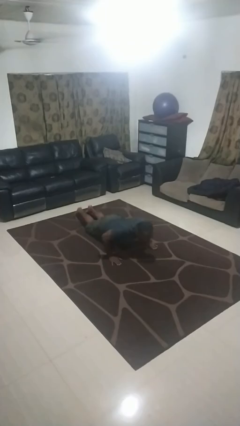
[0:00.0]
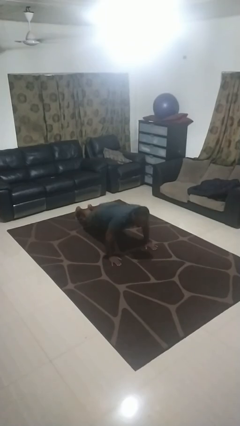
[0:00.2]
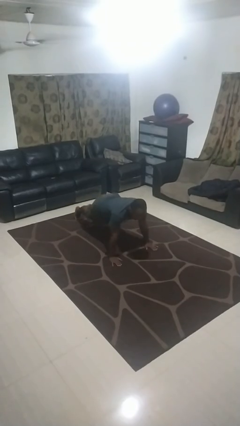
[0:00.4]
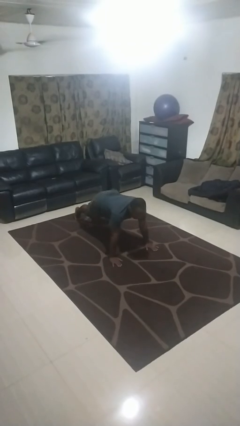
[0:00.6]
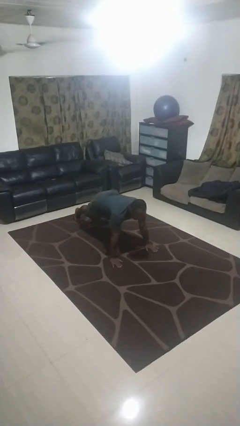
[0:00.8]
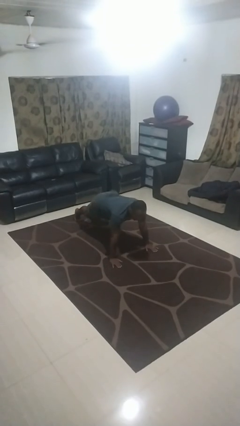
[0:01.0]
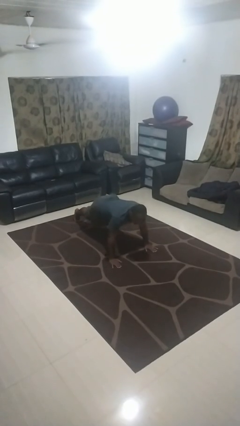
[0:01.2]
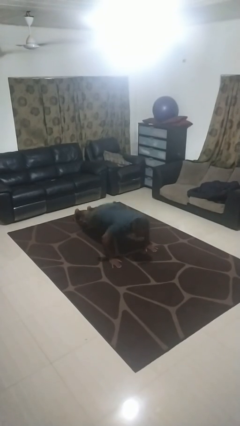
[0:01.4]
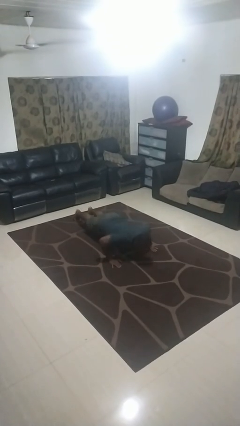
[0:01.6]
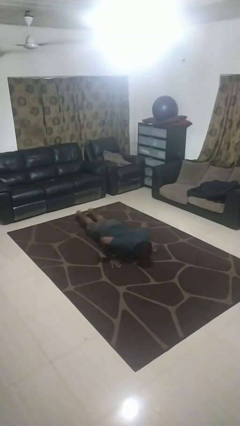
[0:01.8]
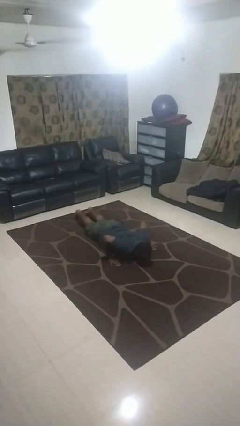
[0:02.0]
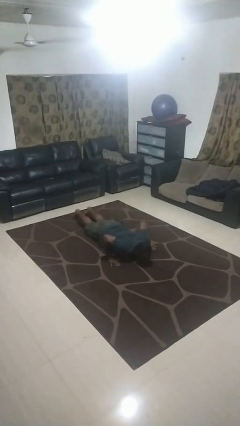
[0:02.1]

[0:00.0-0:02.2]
person exercises with pushup

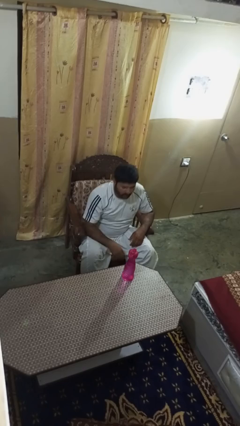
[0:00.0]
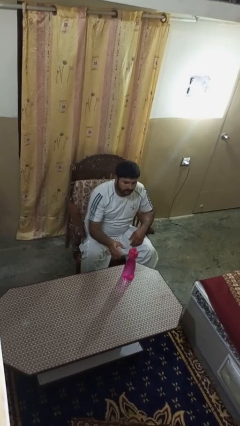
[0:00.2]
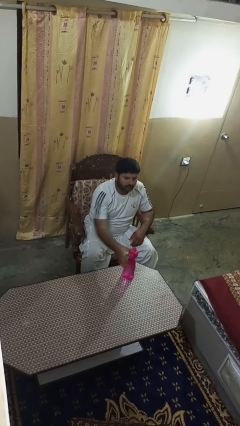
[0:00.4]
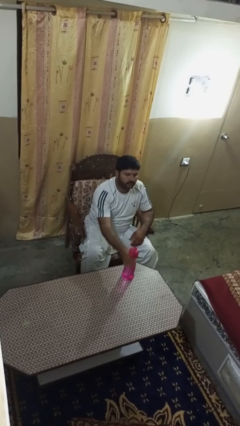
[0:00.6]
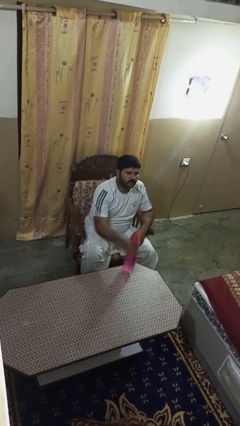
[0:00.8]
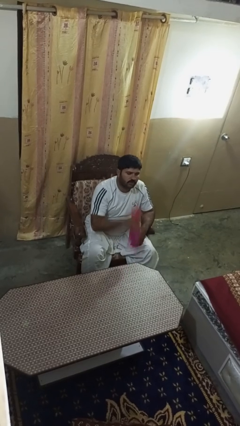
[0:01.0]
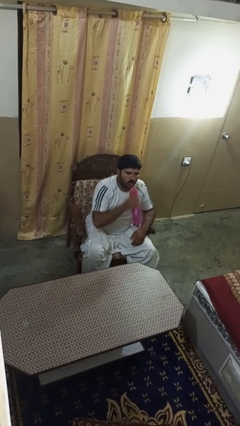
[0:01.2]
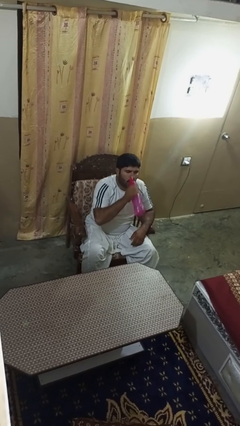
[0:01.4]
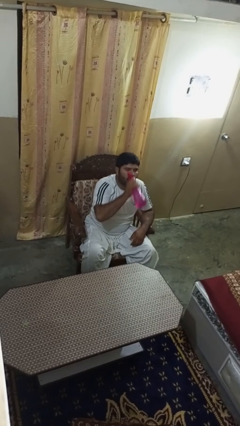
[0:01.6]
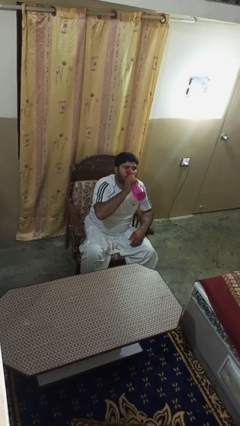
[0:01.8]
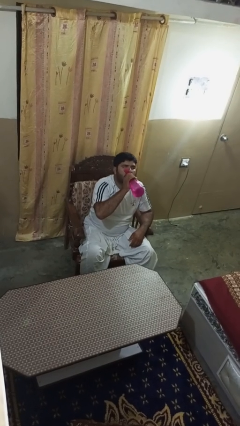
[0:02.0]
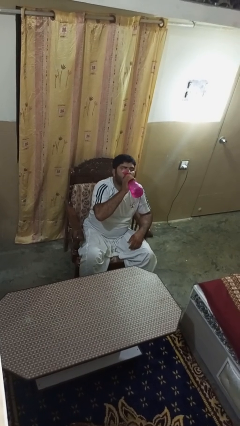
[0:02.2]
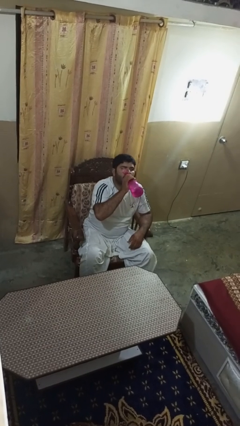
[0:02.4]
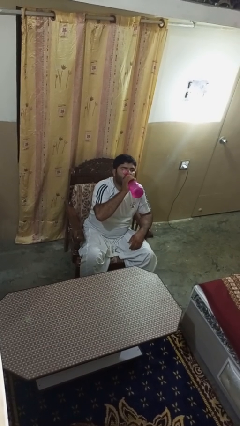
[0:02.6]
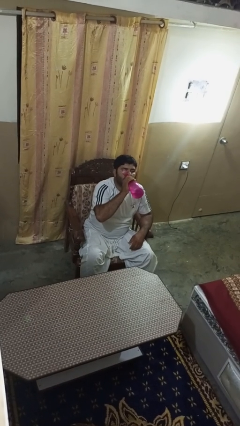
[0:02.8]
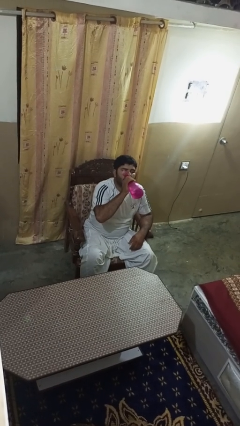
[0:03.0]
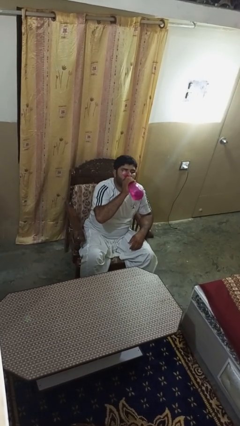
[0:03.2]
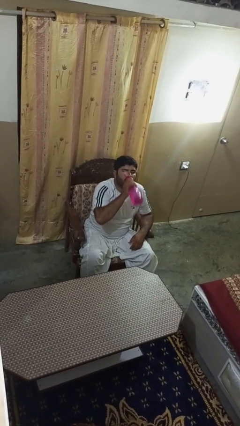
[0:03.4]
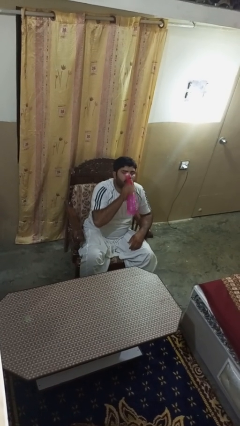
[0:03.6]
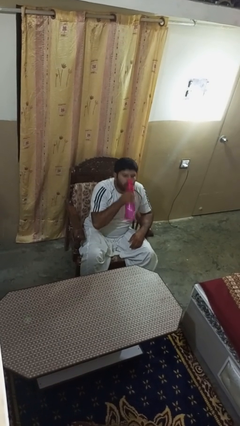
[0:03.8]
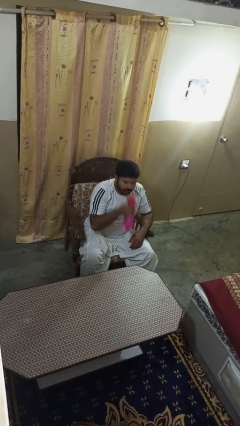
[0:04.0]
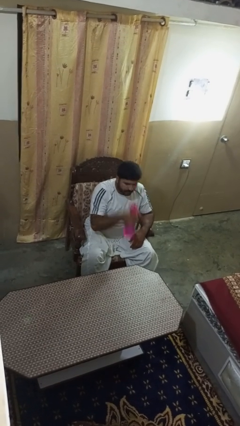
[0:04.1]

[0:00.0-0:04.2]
person drinks from bottle

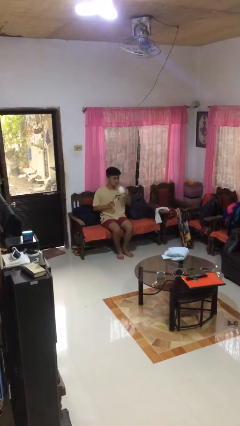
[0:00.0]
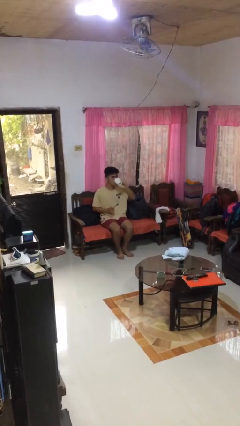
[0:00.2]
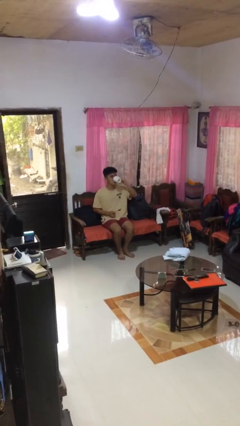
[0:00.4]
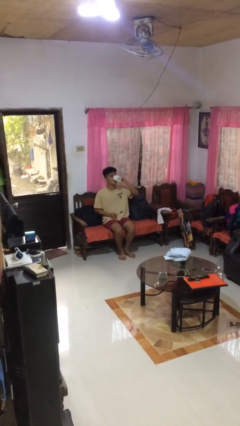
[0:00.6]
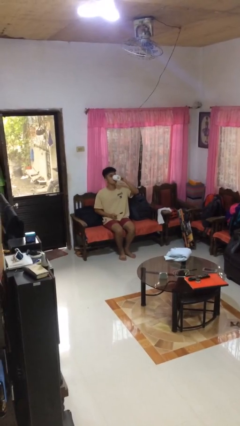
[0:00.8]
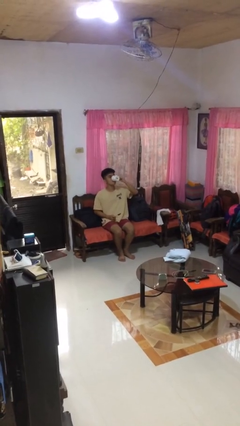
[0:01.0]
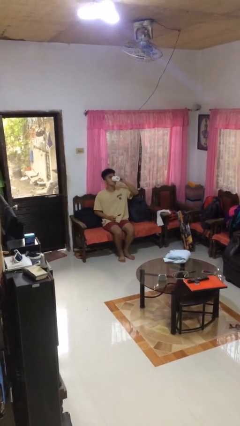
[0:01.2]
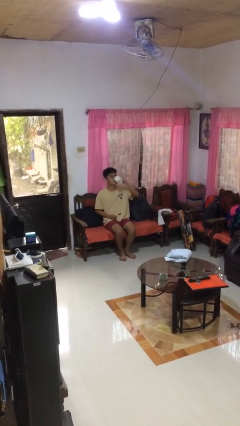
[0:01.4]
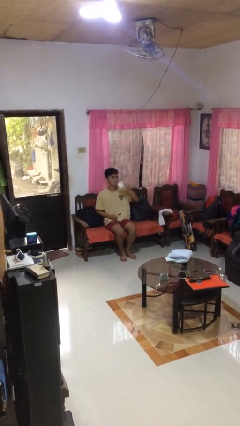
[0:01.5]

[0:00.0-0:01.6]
person drinks from mug

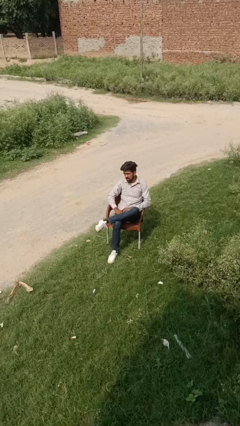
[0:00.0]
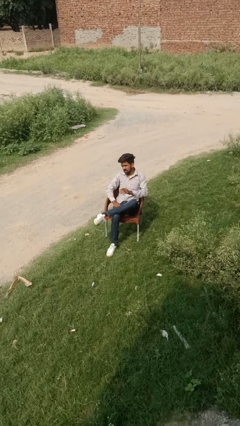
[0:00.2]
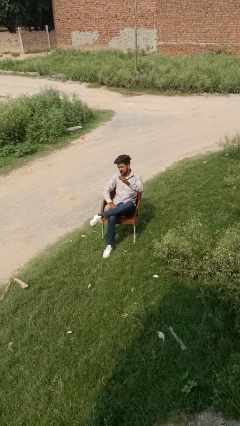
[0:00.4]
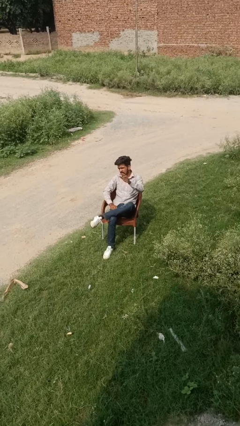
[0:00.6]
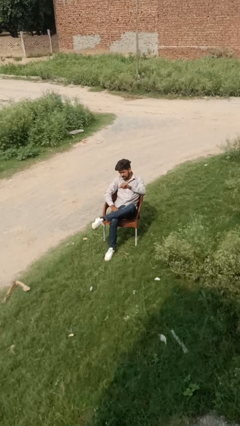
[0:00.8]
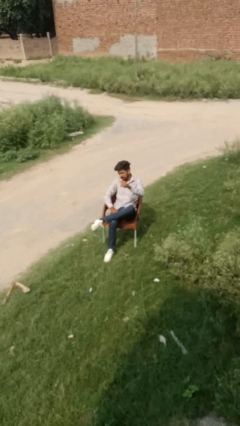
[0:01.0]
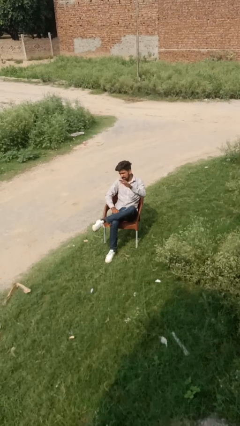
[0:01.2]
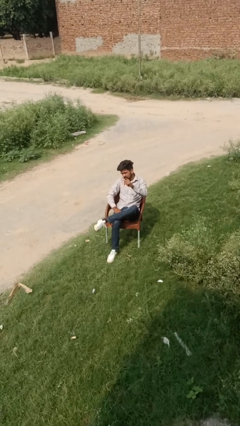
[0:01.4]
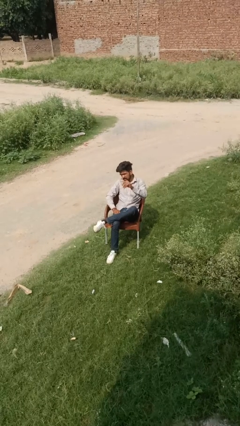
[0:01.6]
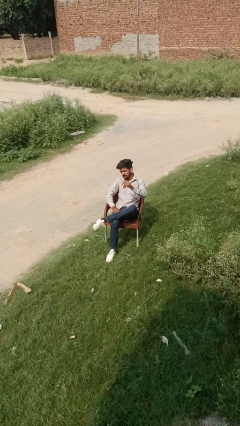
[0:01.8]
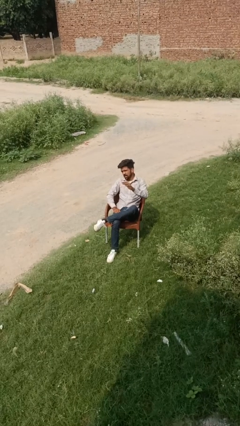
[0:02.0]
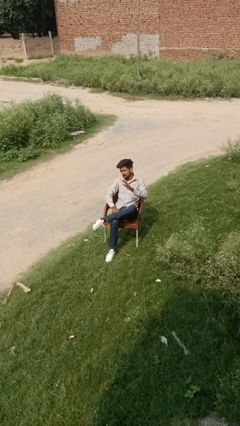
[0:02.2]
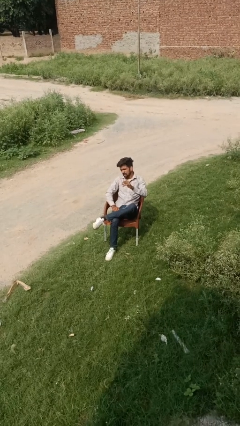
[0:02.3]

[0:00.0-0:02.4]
person gestures come here

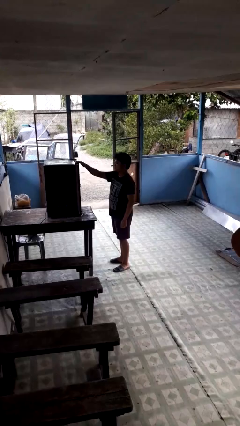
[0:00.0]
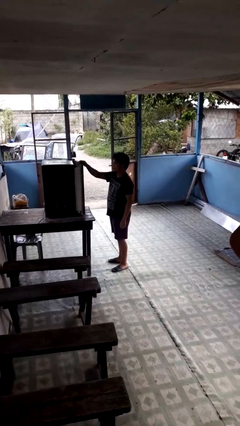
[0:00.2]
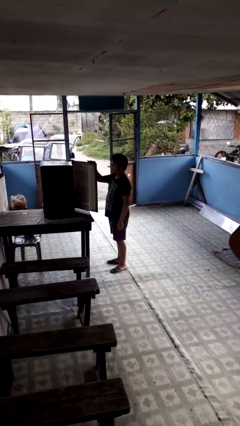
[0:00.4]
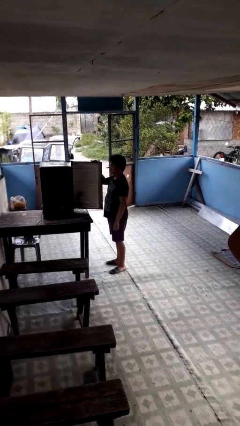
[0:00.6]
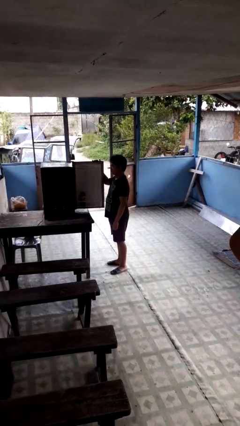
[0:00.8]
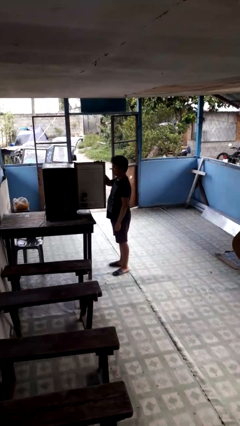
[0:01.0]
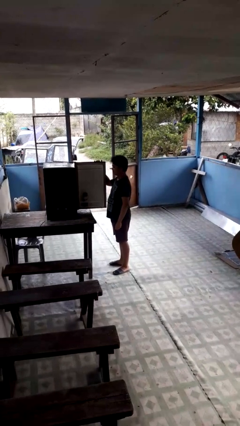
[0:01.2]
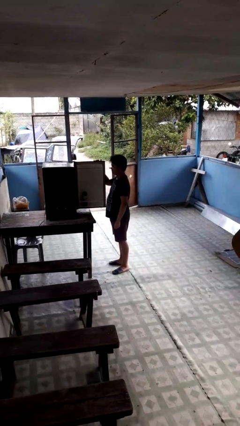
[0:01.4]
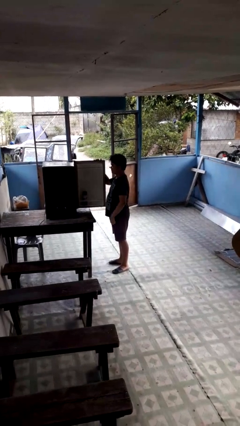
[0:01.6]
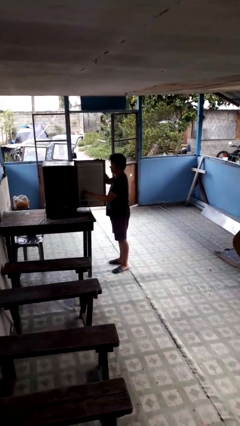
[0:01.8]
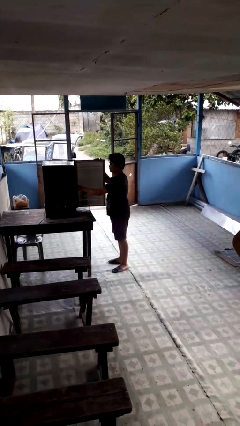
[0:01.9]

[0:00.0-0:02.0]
person opens refrigerator

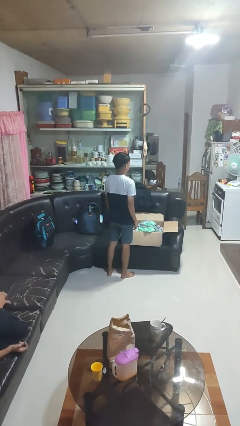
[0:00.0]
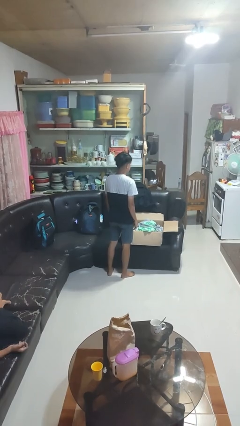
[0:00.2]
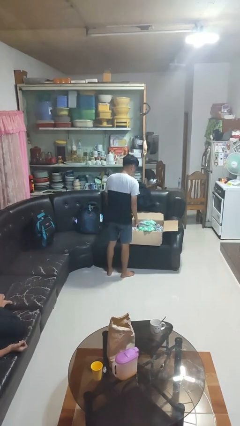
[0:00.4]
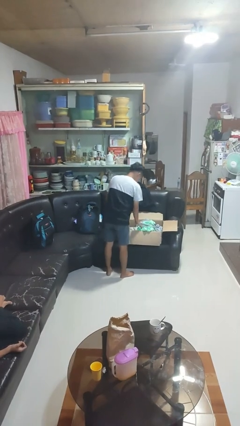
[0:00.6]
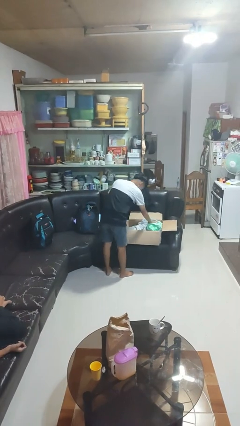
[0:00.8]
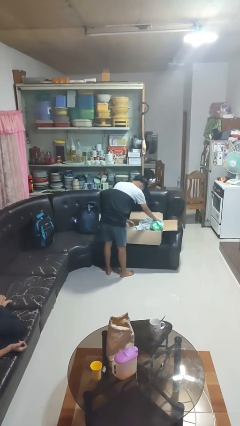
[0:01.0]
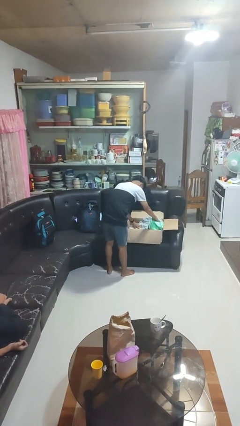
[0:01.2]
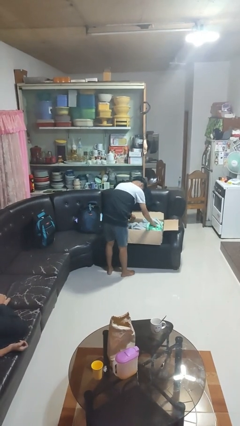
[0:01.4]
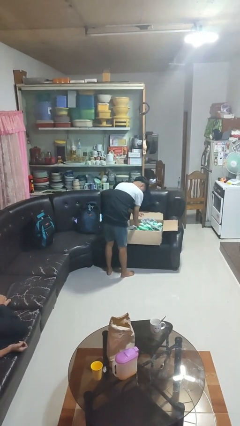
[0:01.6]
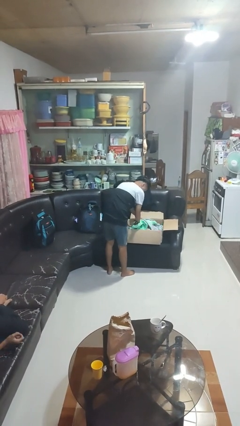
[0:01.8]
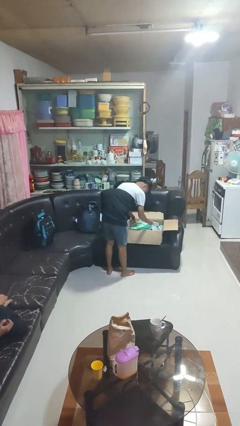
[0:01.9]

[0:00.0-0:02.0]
person searches in box

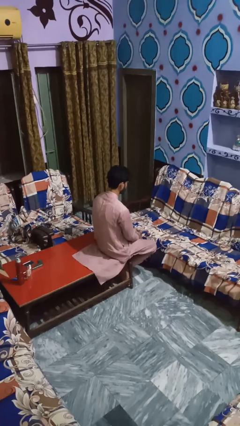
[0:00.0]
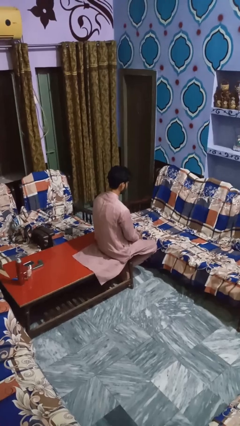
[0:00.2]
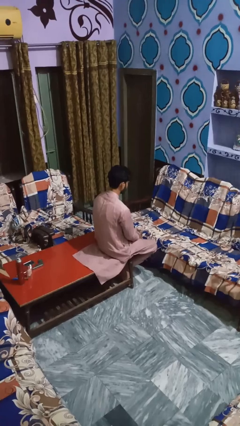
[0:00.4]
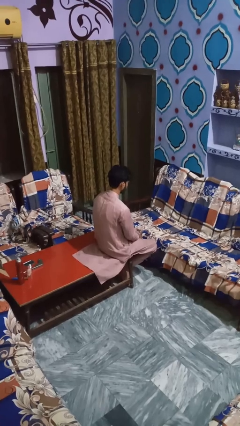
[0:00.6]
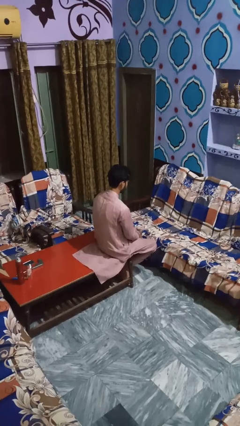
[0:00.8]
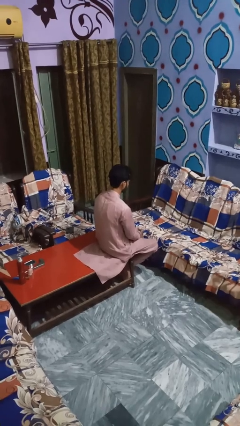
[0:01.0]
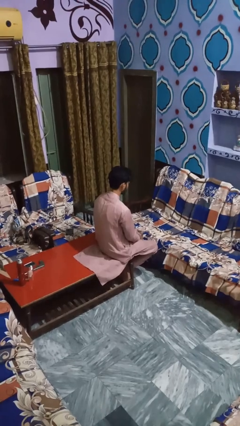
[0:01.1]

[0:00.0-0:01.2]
person shakes head

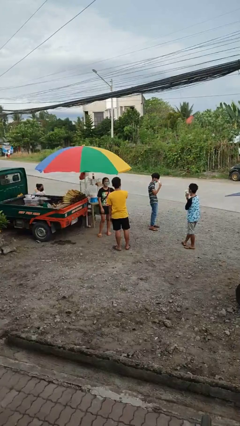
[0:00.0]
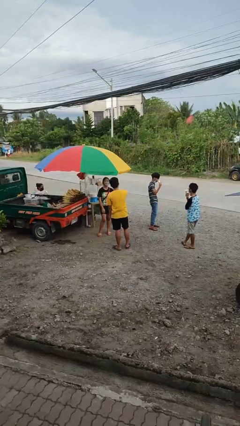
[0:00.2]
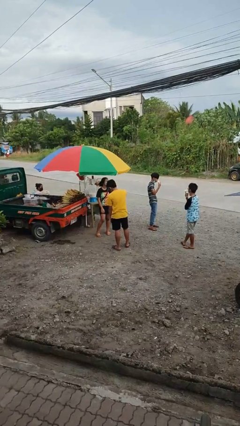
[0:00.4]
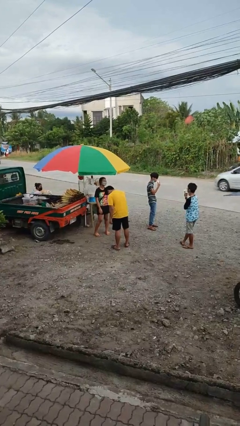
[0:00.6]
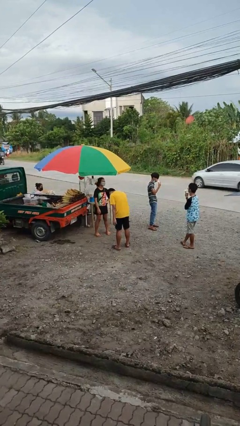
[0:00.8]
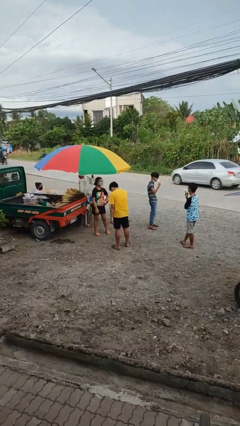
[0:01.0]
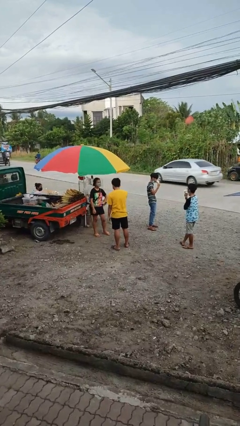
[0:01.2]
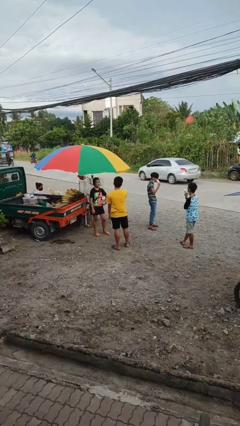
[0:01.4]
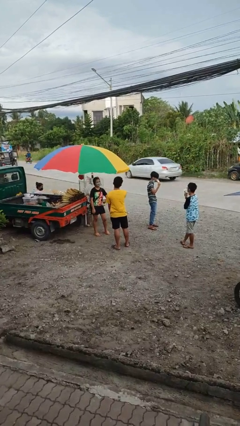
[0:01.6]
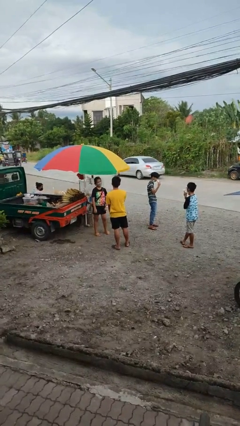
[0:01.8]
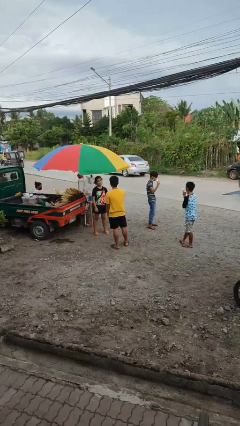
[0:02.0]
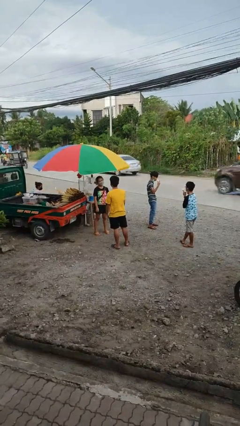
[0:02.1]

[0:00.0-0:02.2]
person laughs with person
